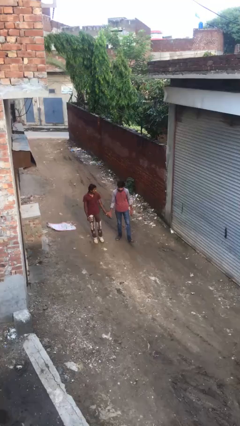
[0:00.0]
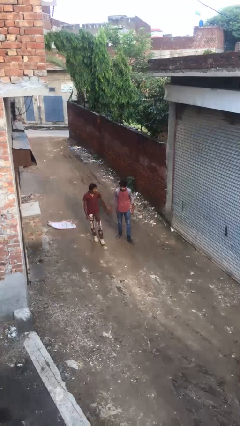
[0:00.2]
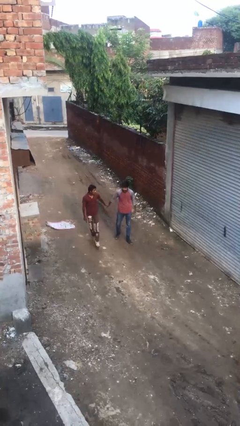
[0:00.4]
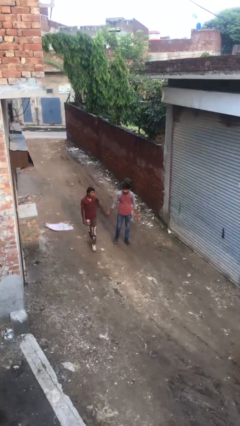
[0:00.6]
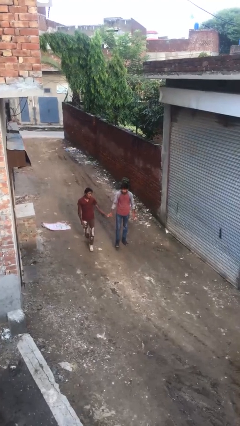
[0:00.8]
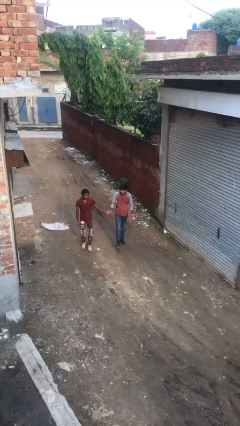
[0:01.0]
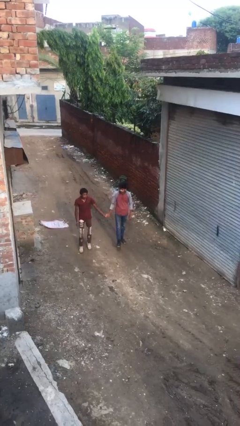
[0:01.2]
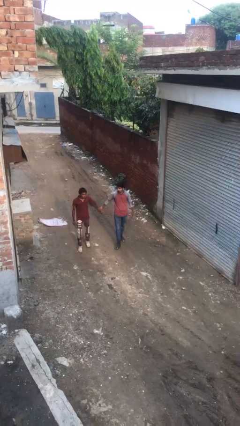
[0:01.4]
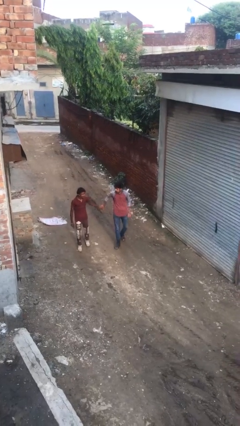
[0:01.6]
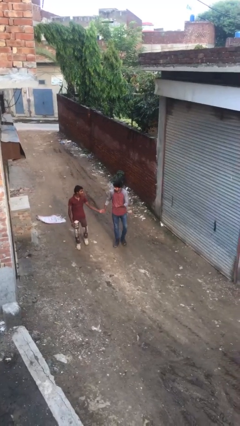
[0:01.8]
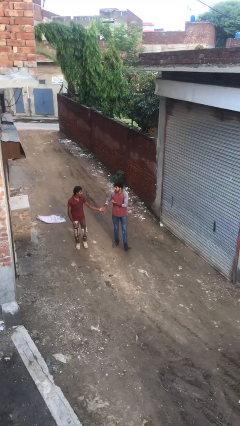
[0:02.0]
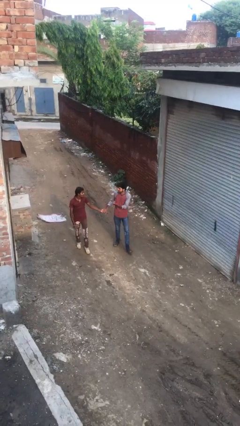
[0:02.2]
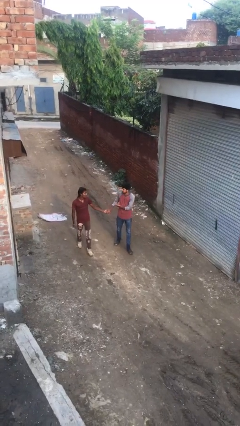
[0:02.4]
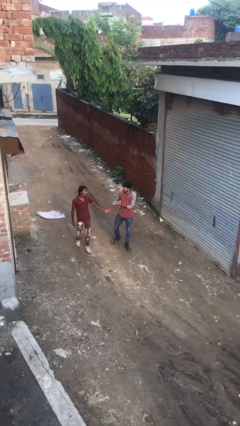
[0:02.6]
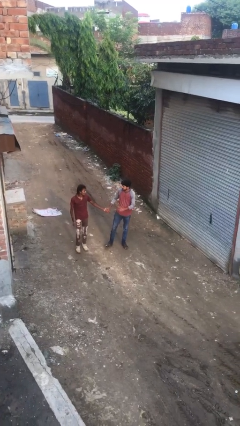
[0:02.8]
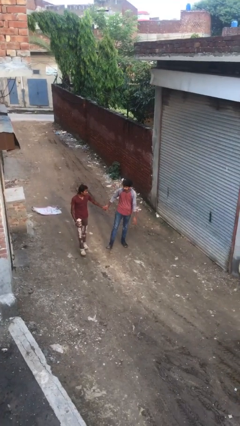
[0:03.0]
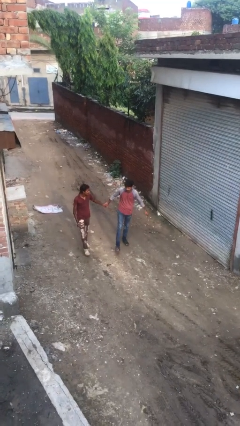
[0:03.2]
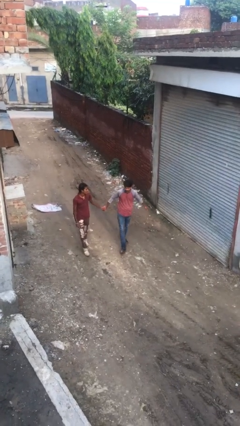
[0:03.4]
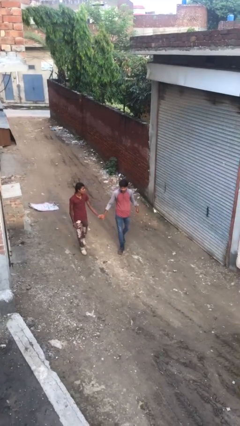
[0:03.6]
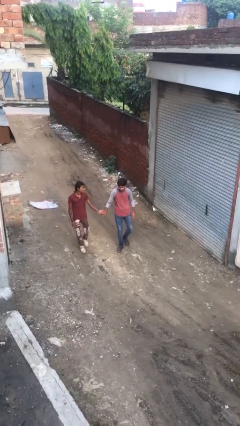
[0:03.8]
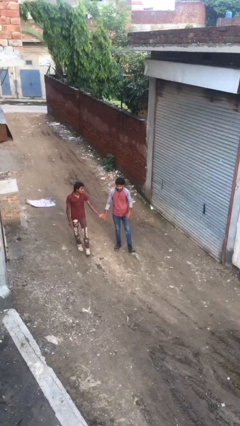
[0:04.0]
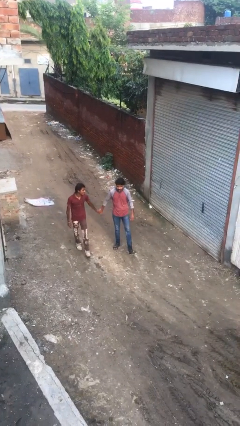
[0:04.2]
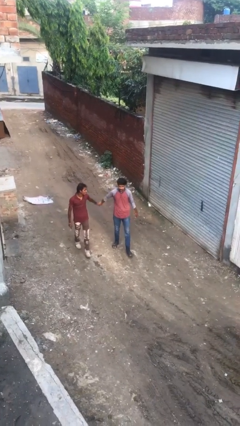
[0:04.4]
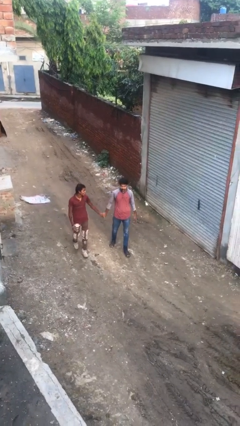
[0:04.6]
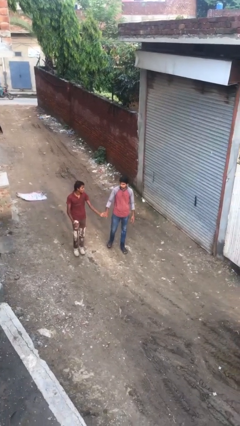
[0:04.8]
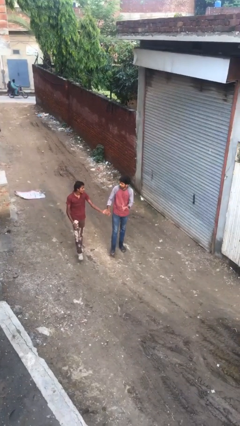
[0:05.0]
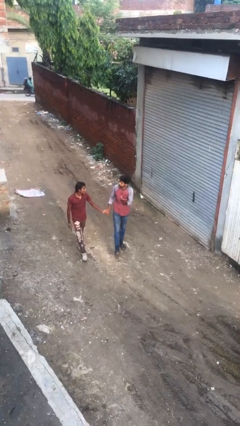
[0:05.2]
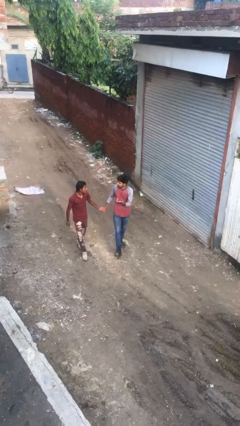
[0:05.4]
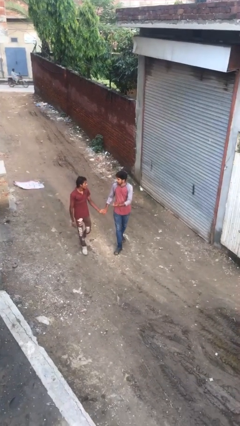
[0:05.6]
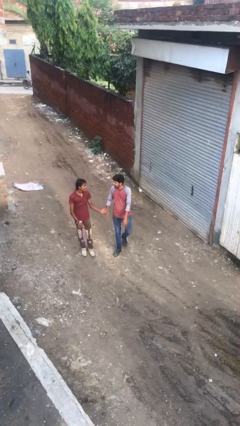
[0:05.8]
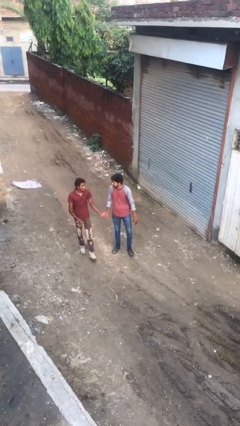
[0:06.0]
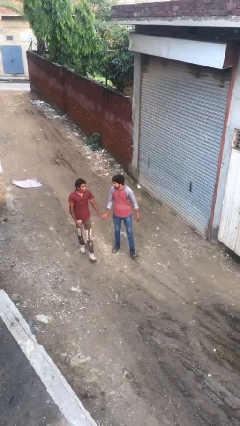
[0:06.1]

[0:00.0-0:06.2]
person holds hand

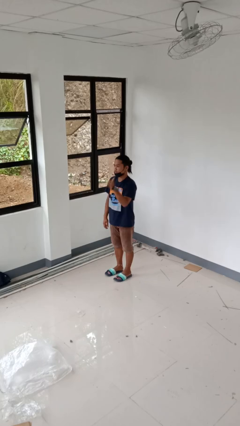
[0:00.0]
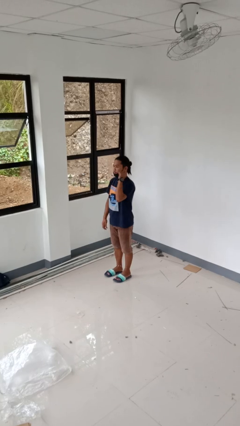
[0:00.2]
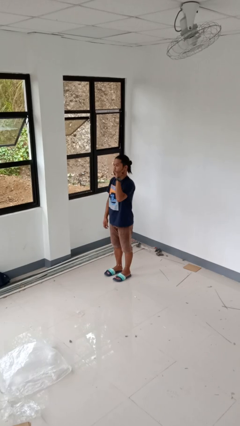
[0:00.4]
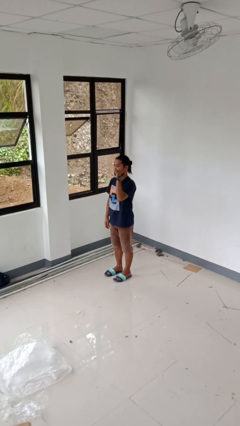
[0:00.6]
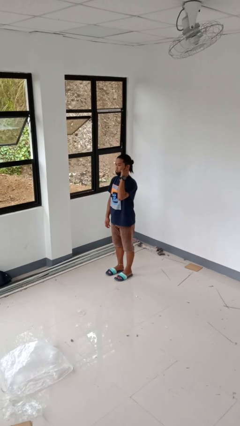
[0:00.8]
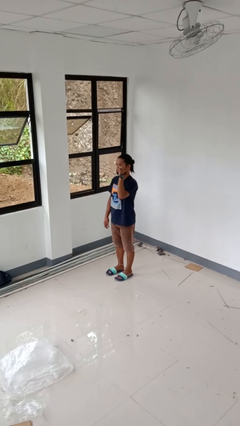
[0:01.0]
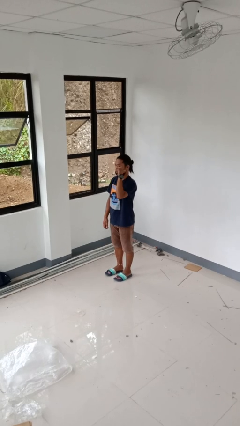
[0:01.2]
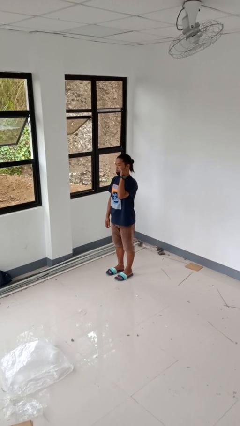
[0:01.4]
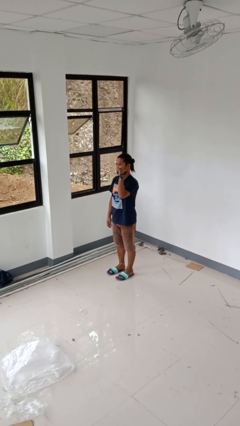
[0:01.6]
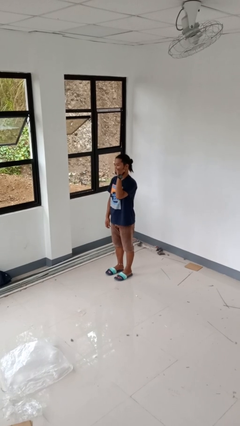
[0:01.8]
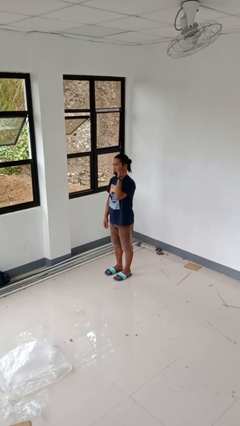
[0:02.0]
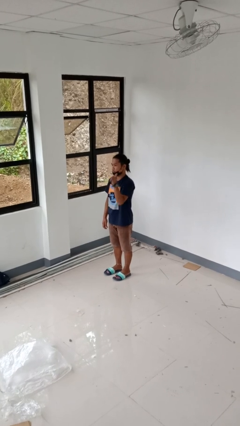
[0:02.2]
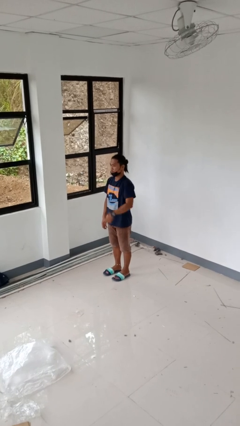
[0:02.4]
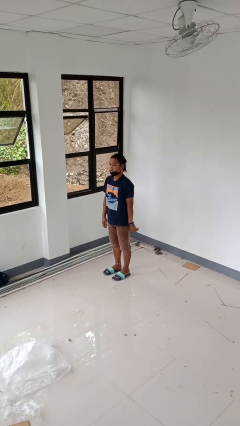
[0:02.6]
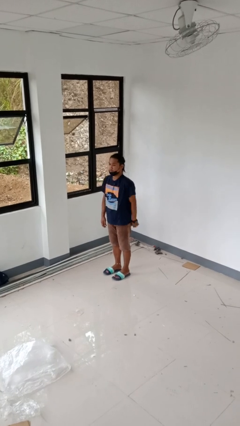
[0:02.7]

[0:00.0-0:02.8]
person gestures behind me

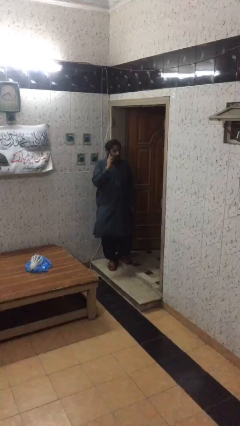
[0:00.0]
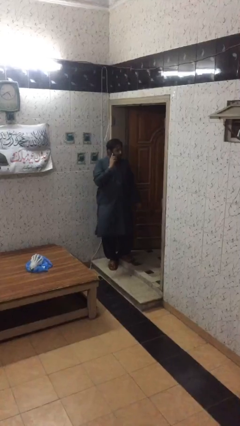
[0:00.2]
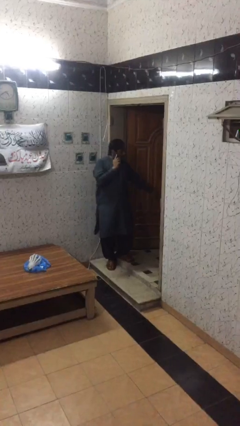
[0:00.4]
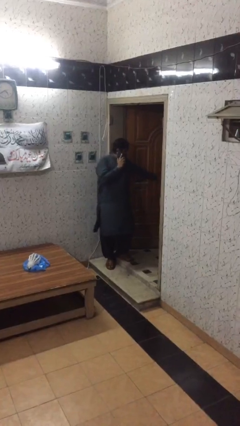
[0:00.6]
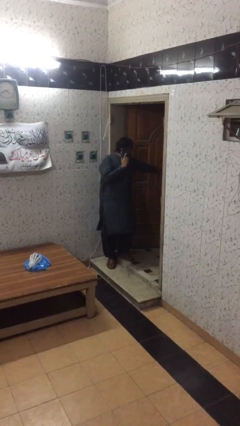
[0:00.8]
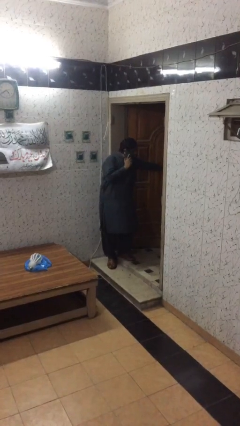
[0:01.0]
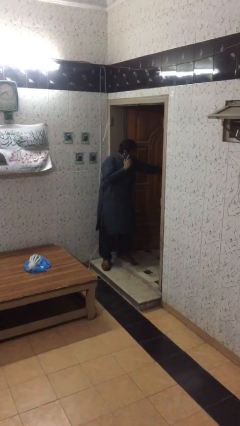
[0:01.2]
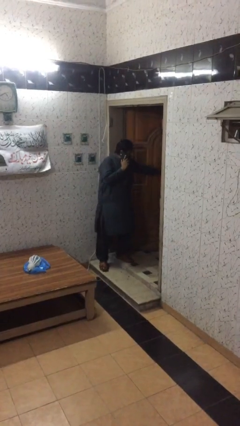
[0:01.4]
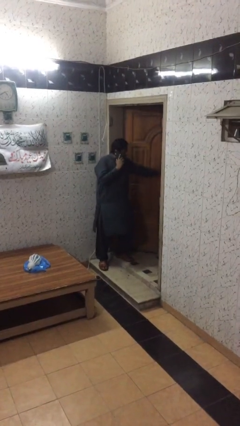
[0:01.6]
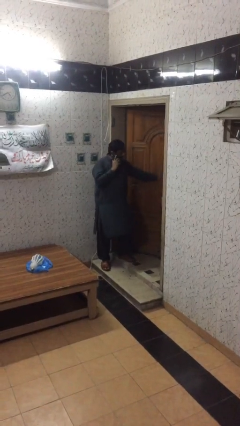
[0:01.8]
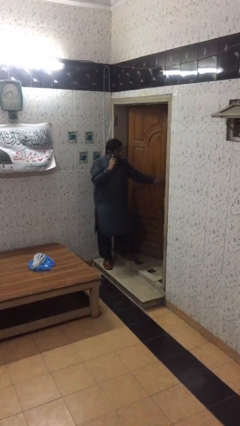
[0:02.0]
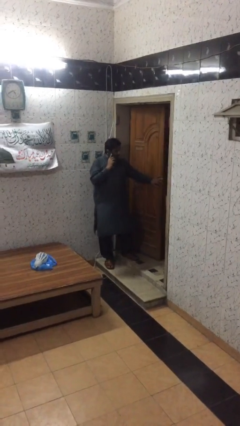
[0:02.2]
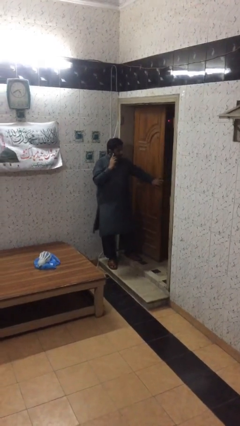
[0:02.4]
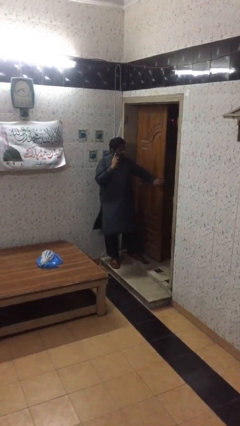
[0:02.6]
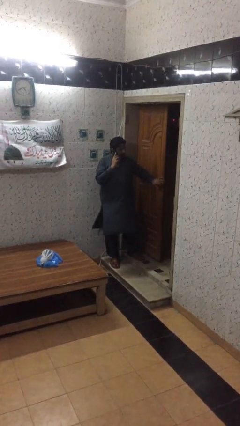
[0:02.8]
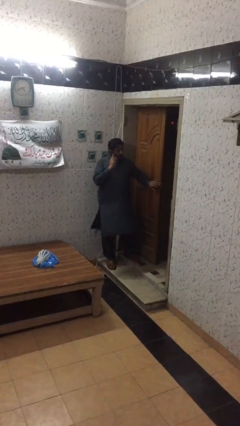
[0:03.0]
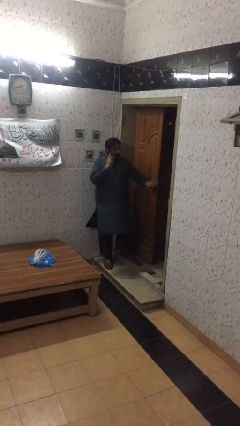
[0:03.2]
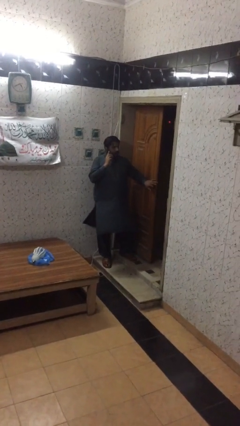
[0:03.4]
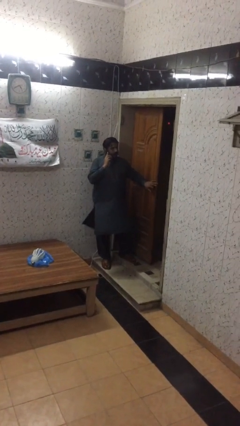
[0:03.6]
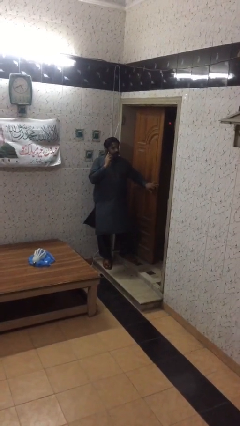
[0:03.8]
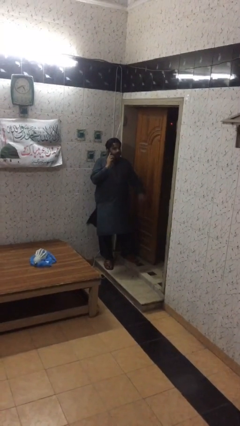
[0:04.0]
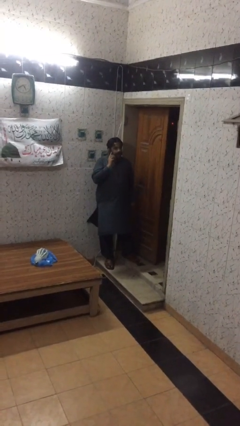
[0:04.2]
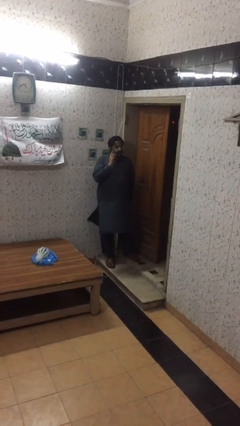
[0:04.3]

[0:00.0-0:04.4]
person closes facility door

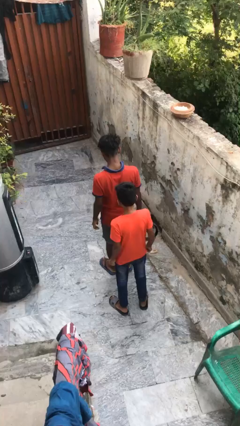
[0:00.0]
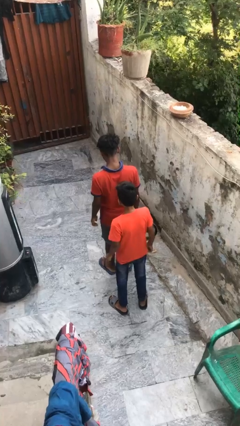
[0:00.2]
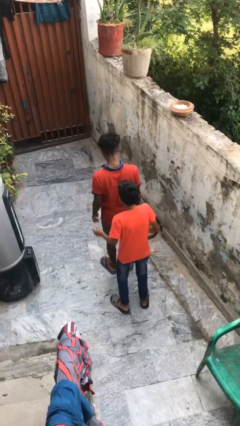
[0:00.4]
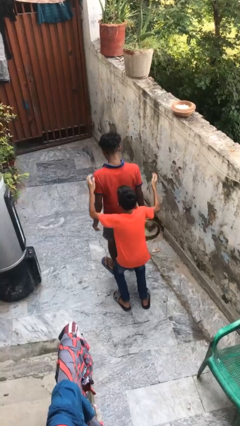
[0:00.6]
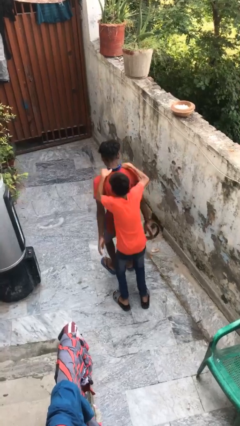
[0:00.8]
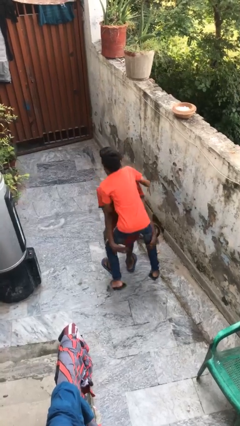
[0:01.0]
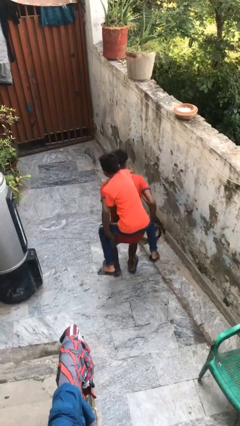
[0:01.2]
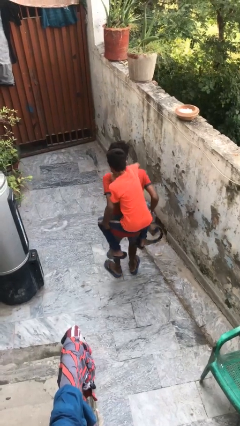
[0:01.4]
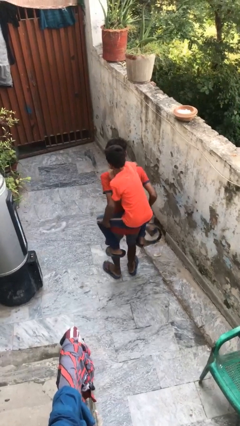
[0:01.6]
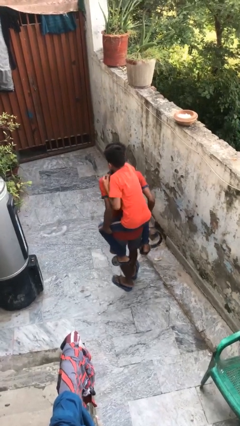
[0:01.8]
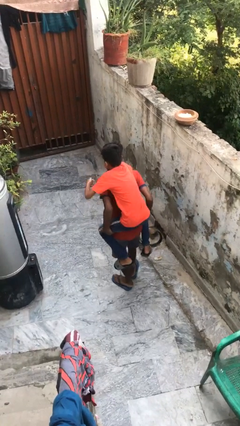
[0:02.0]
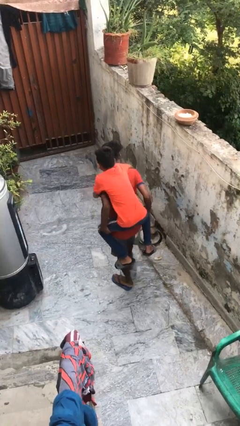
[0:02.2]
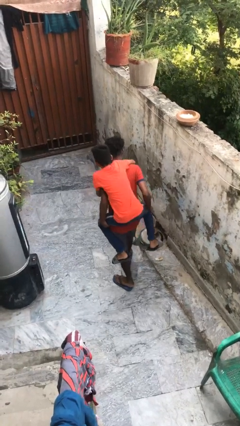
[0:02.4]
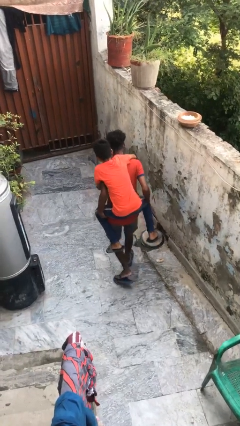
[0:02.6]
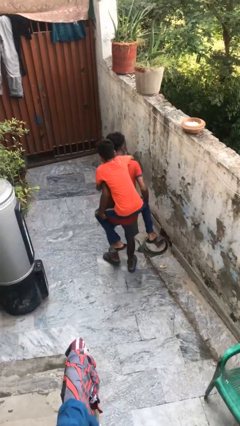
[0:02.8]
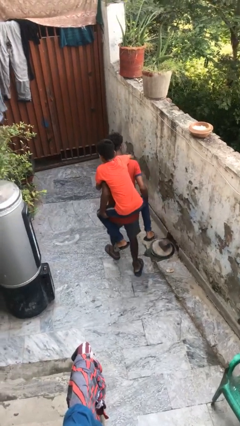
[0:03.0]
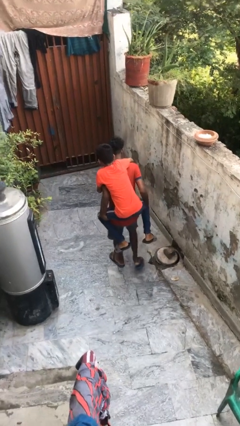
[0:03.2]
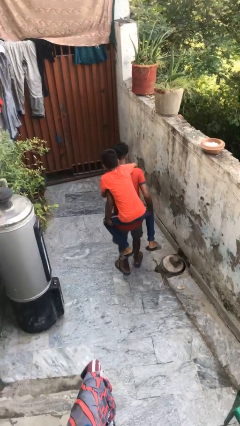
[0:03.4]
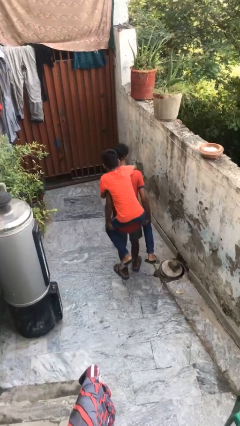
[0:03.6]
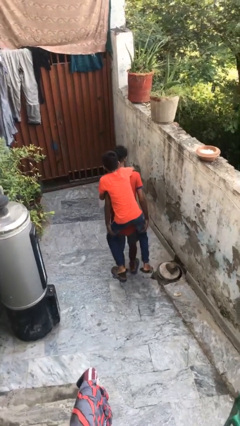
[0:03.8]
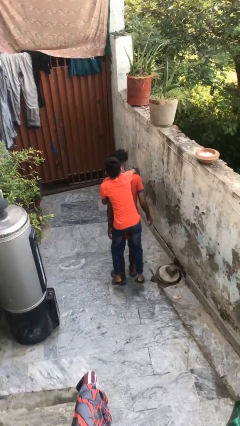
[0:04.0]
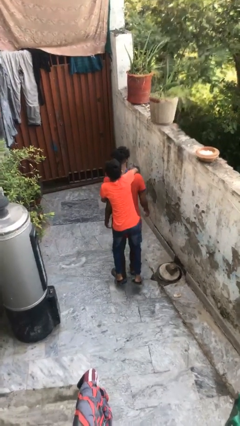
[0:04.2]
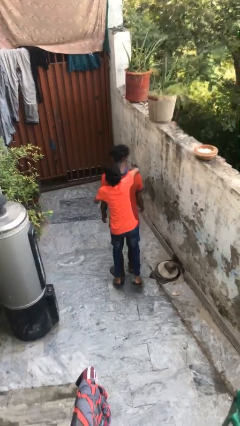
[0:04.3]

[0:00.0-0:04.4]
person carries person on back
